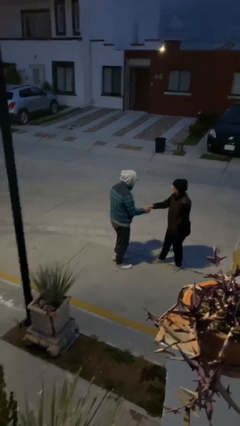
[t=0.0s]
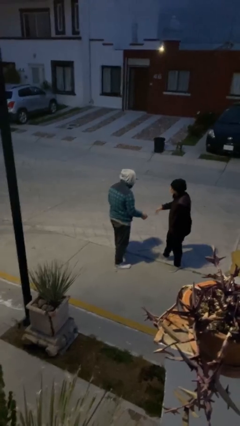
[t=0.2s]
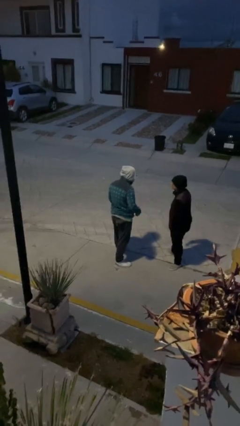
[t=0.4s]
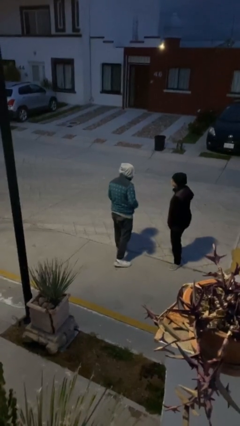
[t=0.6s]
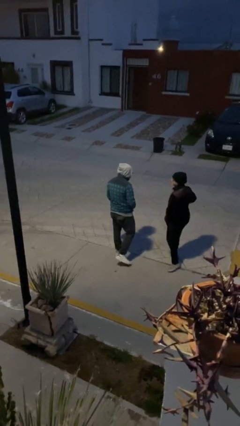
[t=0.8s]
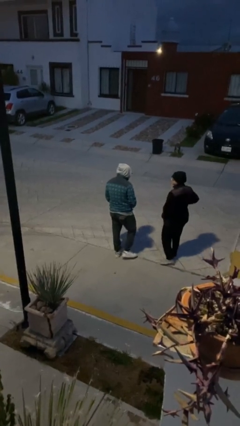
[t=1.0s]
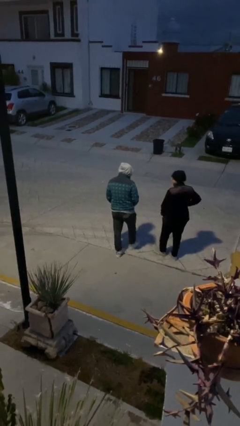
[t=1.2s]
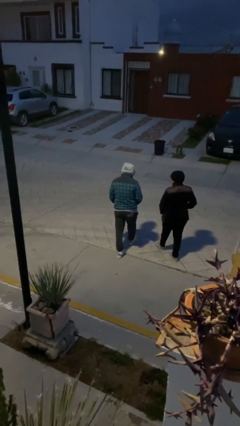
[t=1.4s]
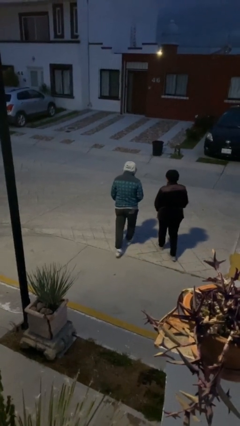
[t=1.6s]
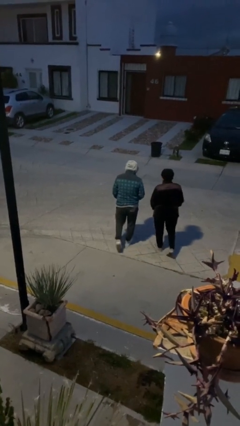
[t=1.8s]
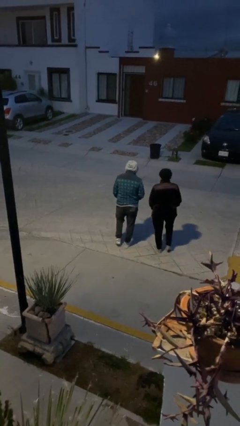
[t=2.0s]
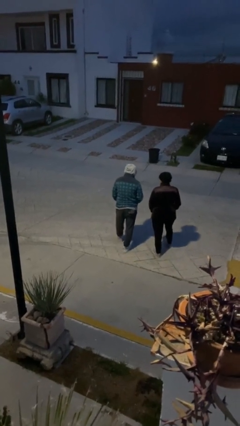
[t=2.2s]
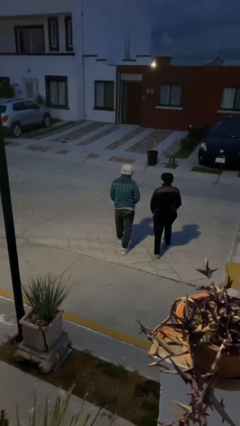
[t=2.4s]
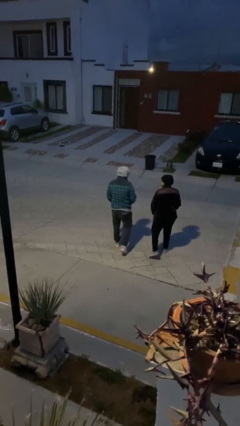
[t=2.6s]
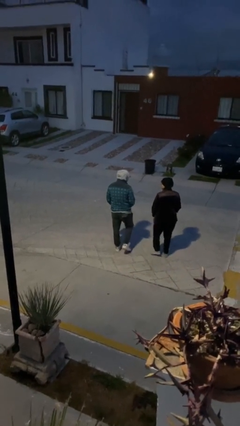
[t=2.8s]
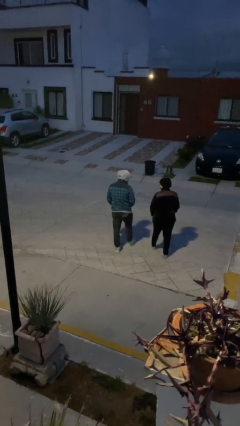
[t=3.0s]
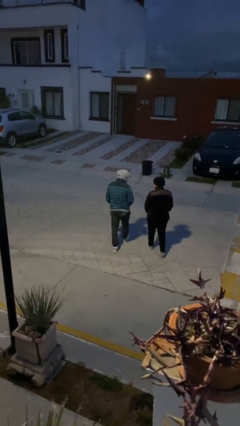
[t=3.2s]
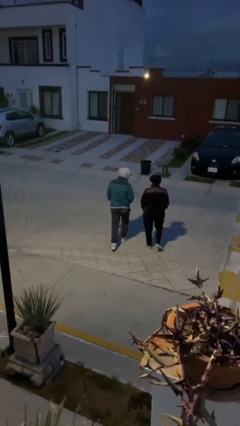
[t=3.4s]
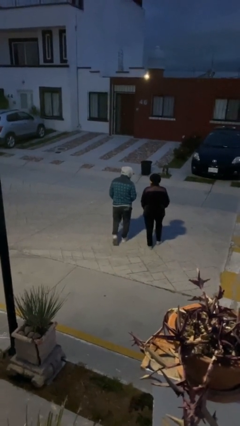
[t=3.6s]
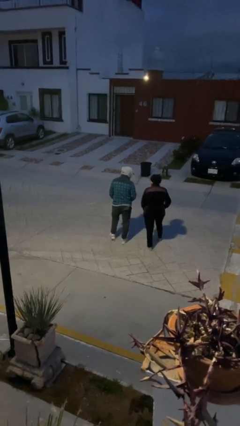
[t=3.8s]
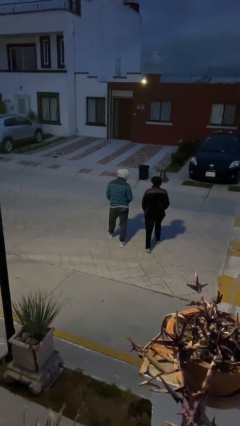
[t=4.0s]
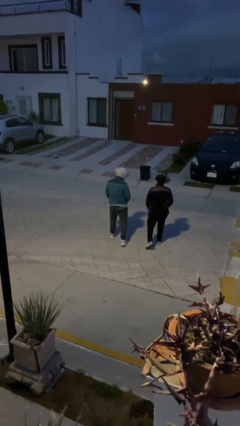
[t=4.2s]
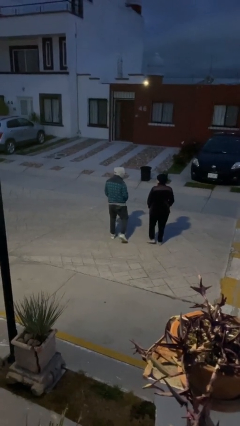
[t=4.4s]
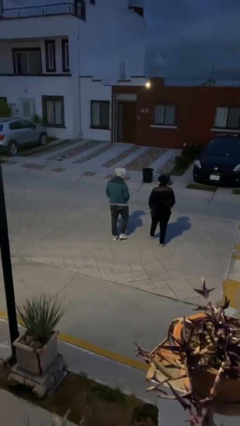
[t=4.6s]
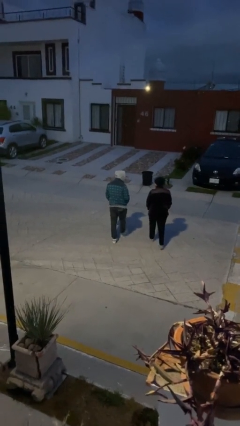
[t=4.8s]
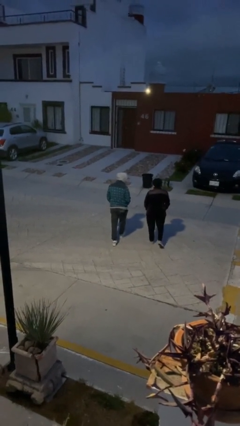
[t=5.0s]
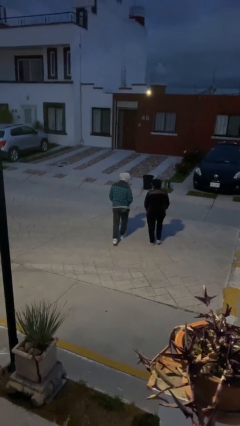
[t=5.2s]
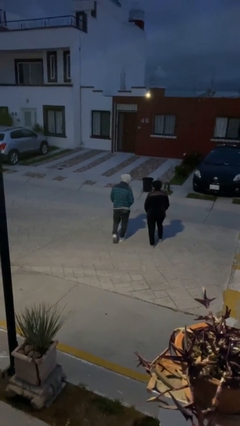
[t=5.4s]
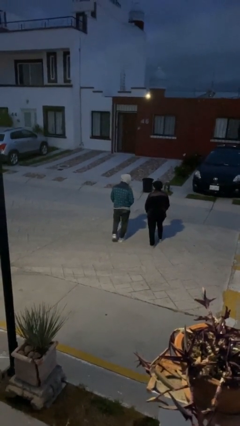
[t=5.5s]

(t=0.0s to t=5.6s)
person talks to person

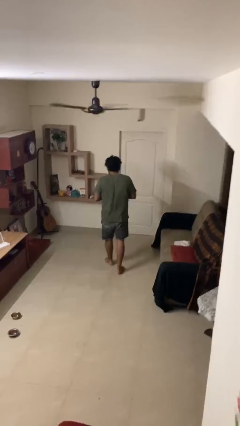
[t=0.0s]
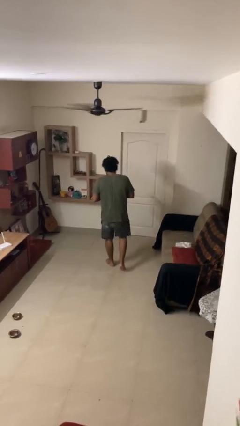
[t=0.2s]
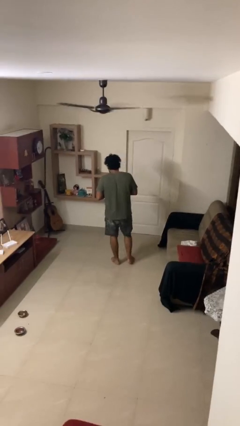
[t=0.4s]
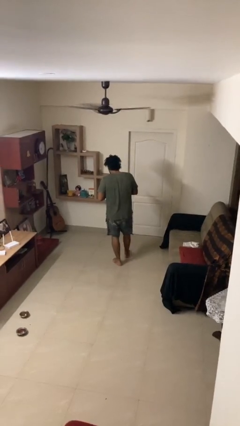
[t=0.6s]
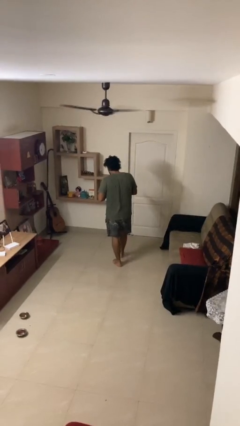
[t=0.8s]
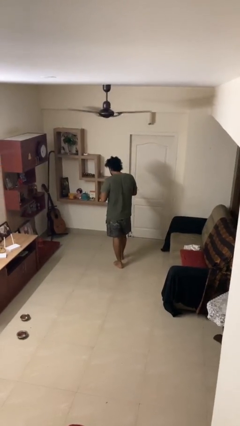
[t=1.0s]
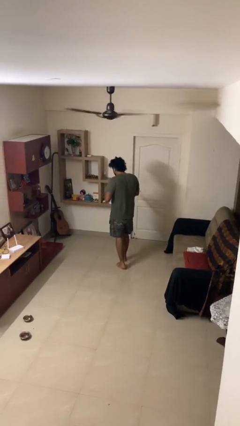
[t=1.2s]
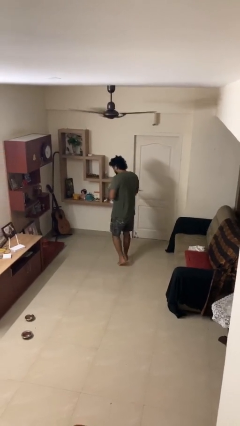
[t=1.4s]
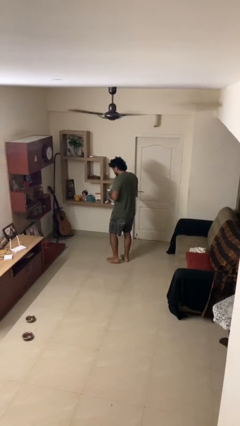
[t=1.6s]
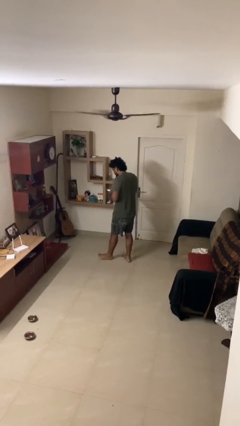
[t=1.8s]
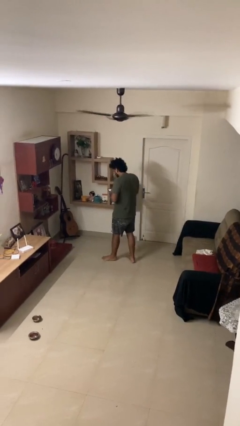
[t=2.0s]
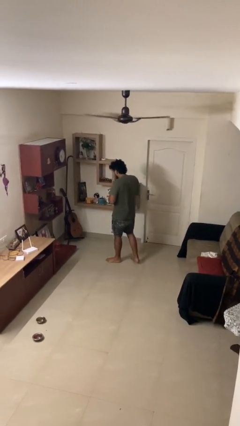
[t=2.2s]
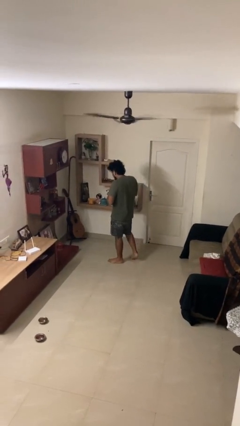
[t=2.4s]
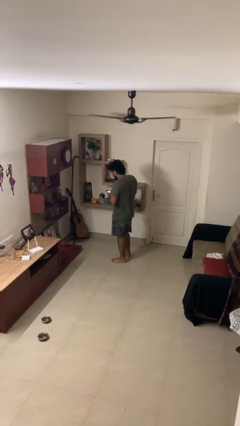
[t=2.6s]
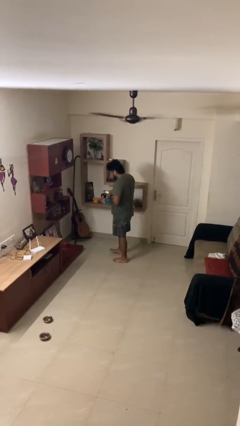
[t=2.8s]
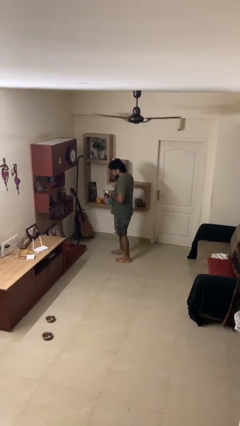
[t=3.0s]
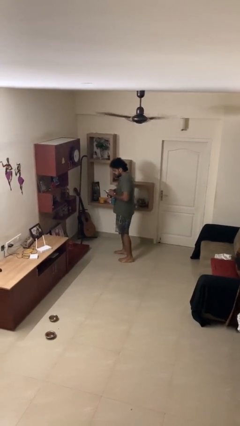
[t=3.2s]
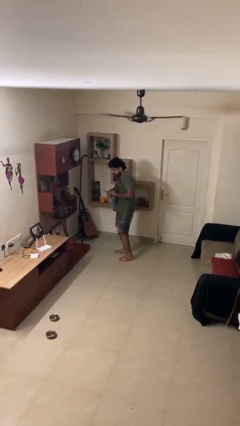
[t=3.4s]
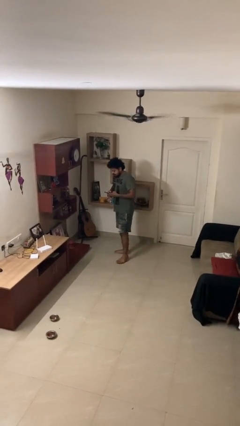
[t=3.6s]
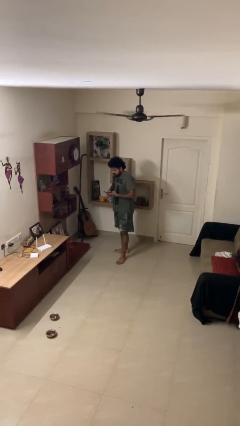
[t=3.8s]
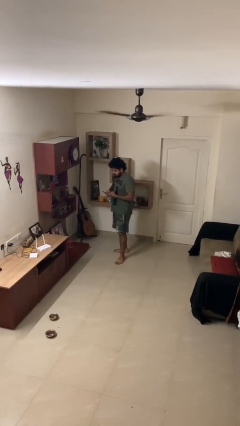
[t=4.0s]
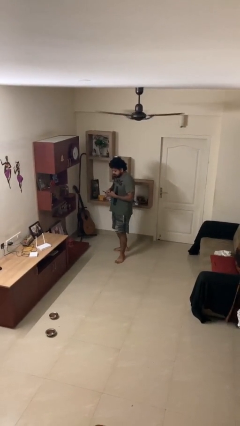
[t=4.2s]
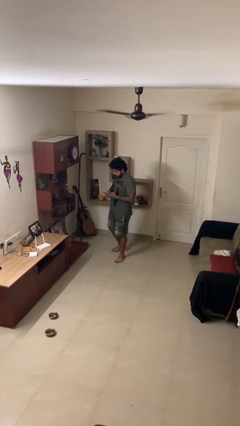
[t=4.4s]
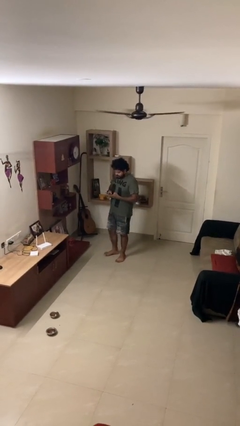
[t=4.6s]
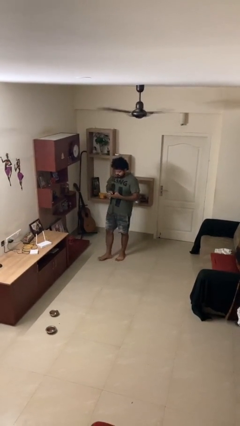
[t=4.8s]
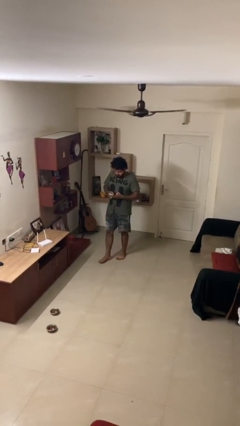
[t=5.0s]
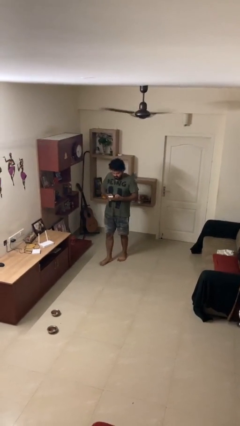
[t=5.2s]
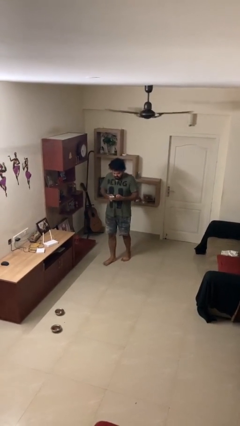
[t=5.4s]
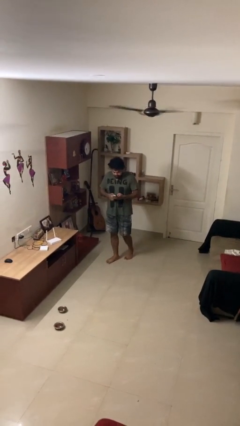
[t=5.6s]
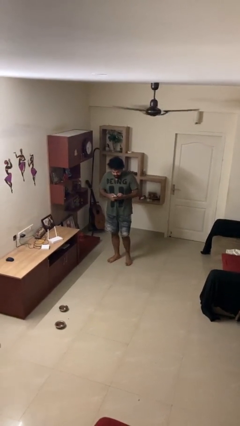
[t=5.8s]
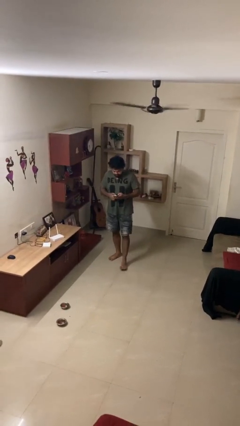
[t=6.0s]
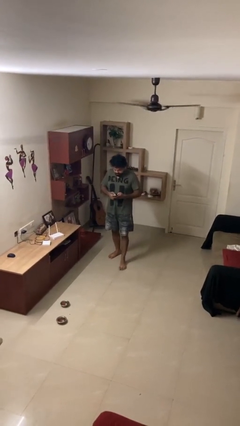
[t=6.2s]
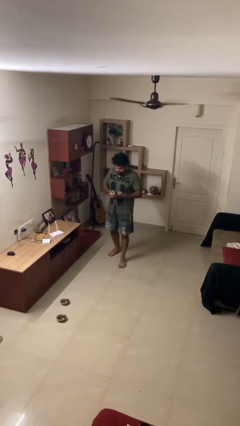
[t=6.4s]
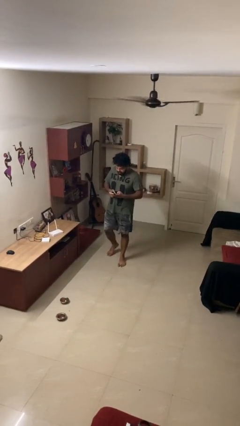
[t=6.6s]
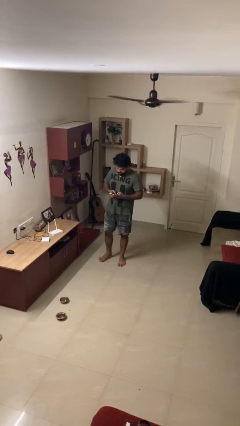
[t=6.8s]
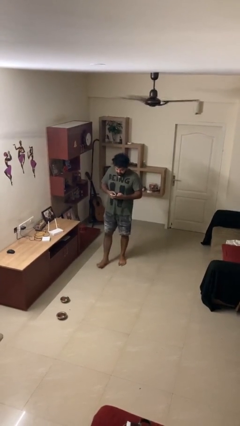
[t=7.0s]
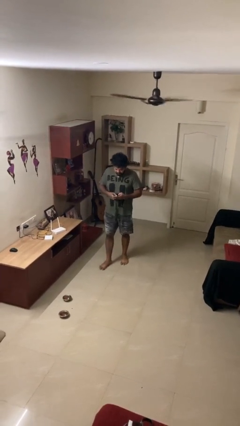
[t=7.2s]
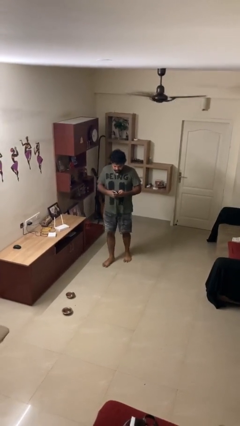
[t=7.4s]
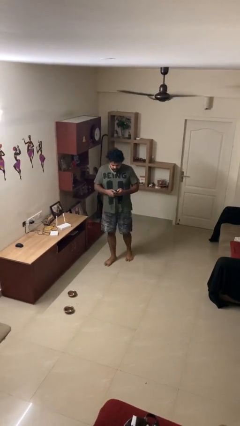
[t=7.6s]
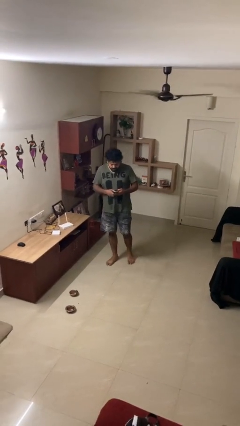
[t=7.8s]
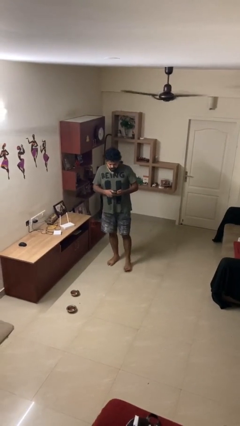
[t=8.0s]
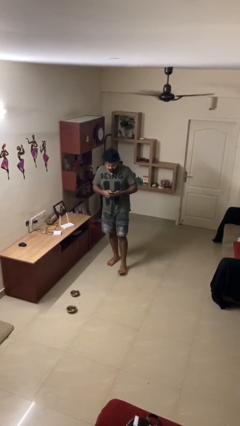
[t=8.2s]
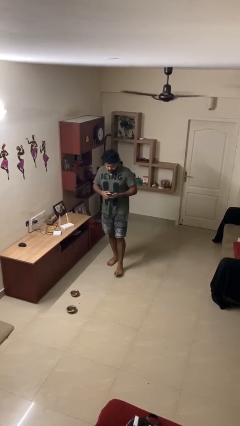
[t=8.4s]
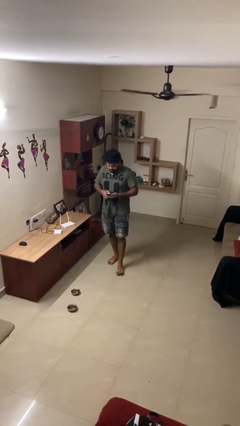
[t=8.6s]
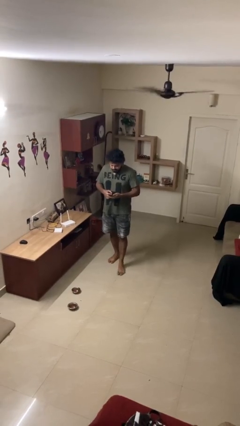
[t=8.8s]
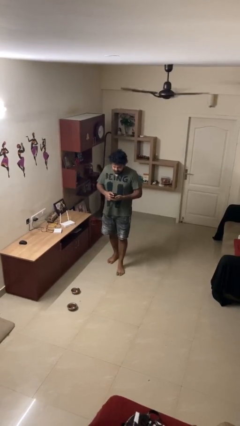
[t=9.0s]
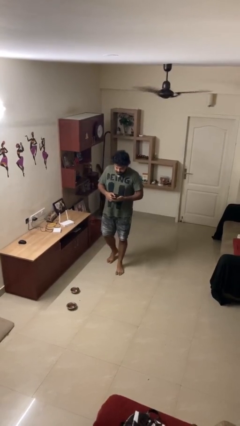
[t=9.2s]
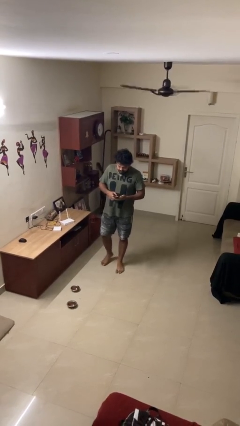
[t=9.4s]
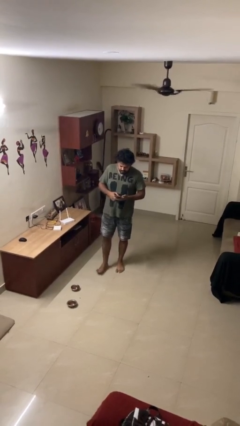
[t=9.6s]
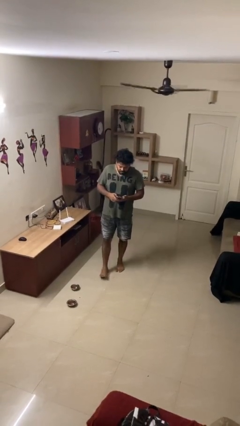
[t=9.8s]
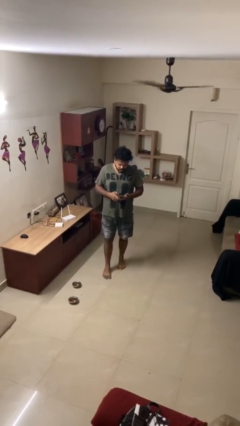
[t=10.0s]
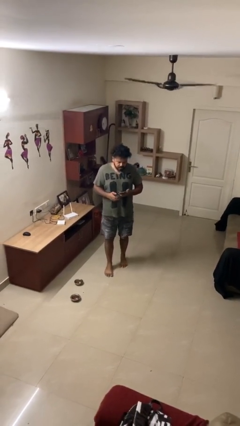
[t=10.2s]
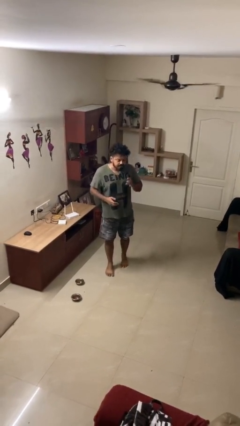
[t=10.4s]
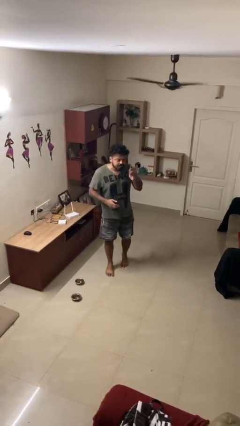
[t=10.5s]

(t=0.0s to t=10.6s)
person texts on phone

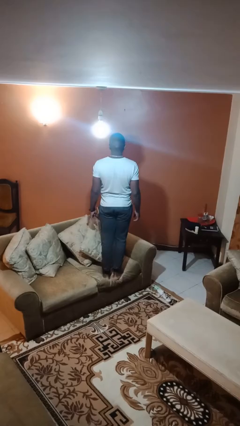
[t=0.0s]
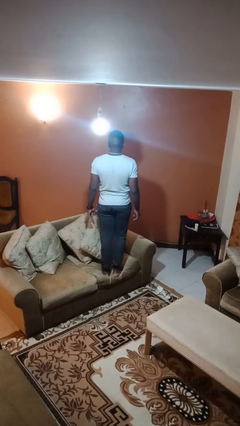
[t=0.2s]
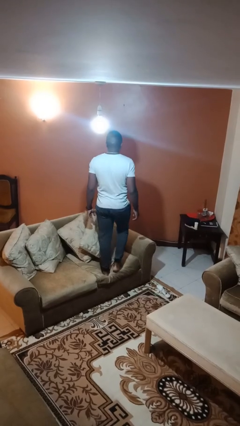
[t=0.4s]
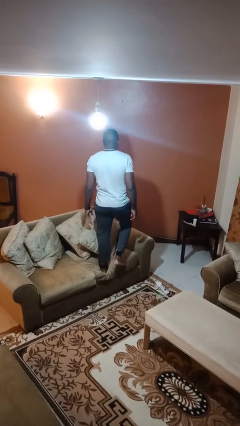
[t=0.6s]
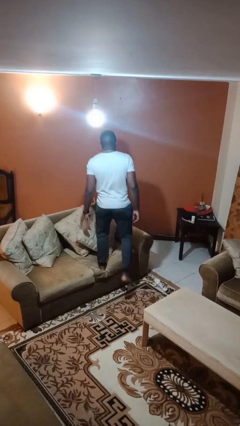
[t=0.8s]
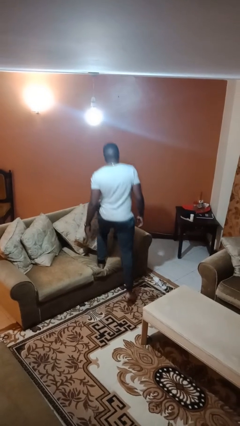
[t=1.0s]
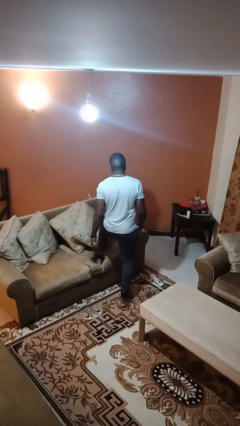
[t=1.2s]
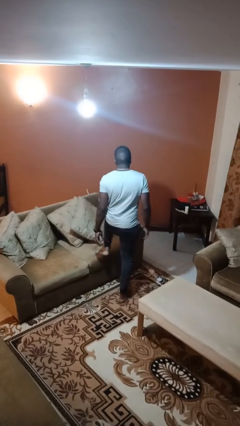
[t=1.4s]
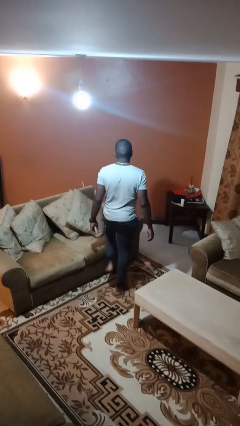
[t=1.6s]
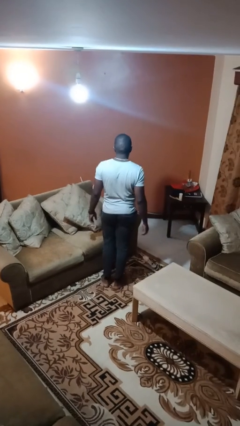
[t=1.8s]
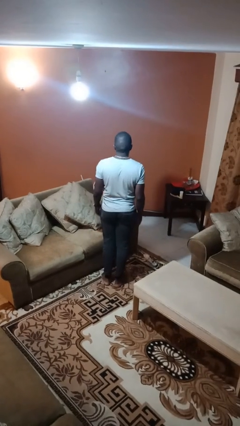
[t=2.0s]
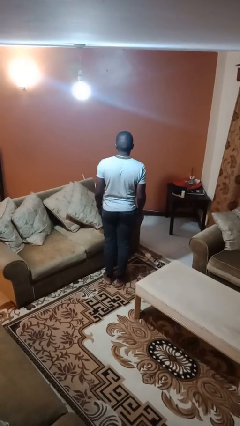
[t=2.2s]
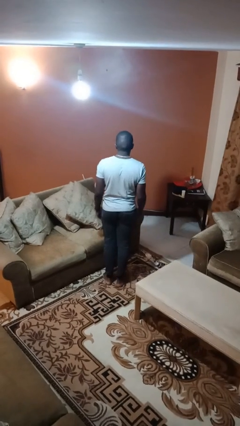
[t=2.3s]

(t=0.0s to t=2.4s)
person climbs off couch
